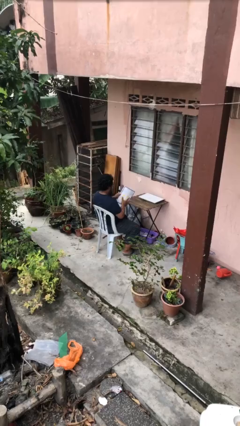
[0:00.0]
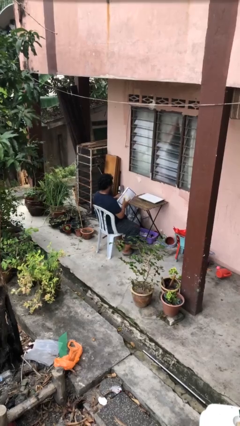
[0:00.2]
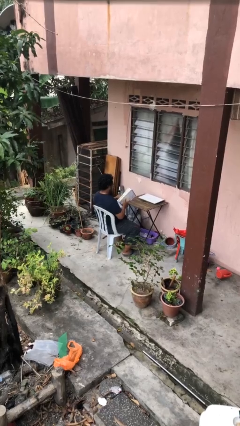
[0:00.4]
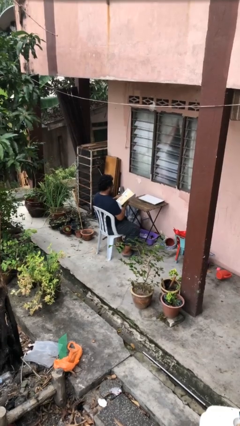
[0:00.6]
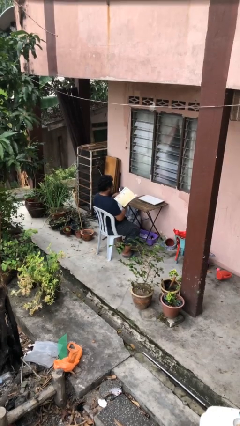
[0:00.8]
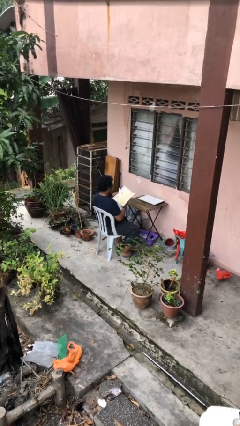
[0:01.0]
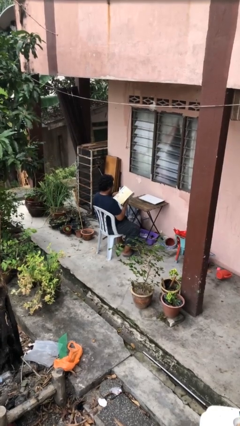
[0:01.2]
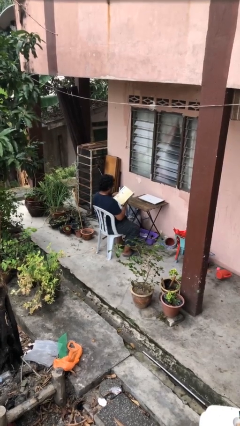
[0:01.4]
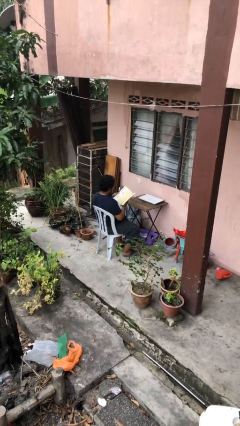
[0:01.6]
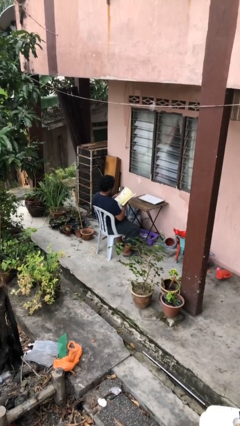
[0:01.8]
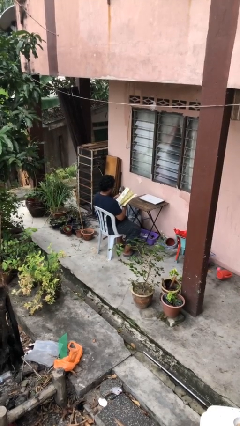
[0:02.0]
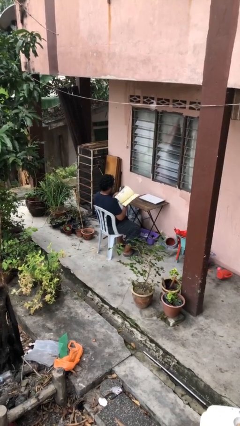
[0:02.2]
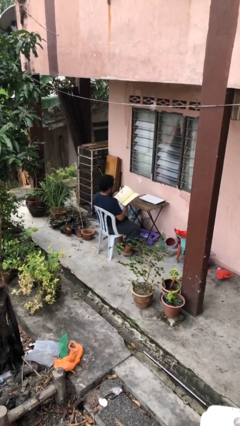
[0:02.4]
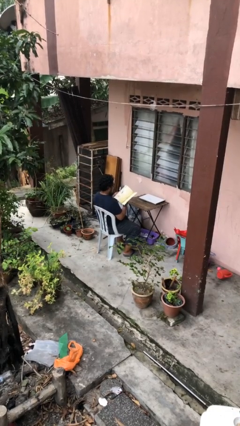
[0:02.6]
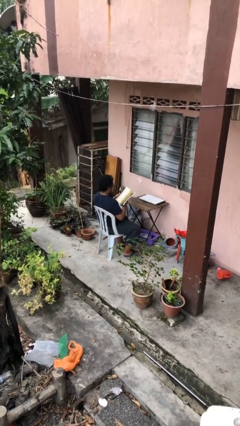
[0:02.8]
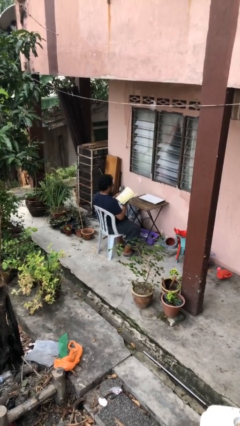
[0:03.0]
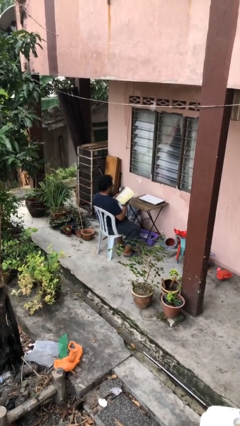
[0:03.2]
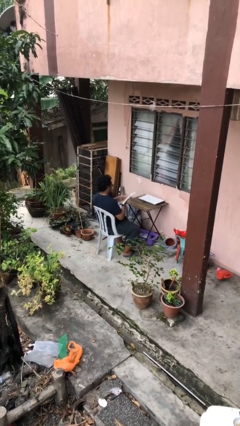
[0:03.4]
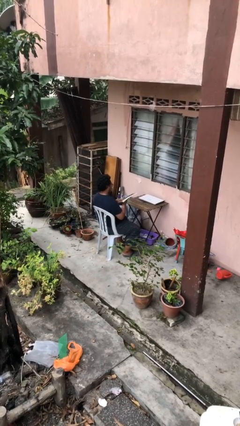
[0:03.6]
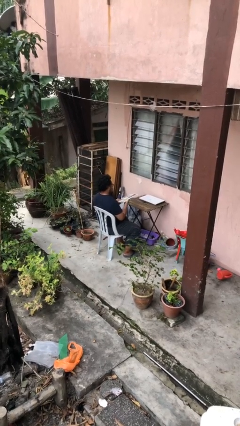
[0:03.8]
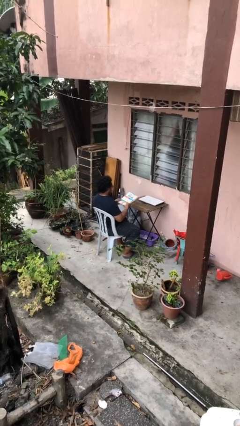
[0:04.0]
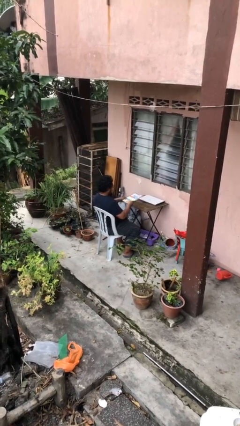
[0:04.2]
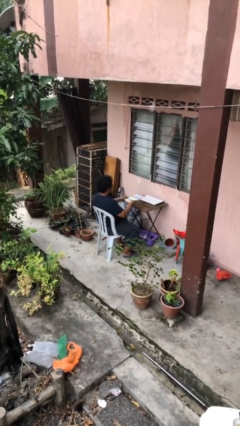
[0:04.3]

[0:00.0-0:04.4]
person reads document

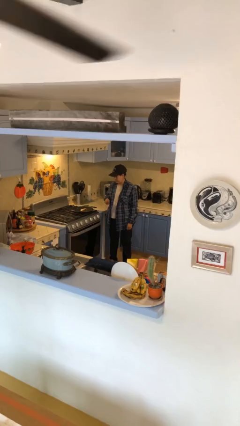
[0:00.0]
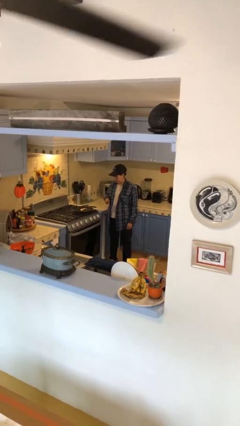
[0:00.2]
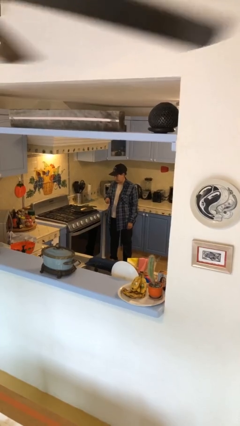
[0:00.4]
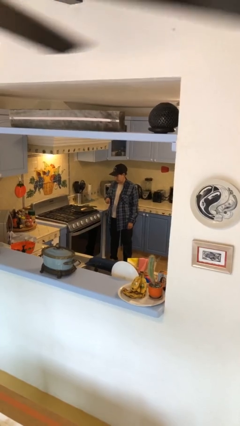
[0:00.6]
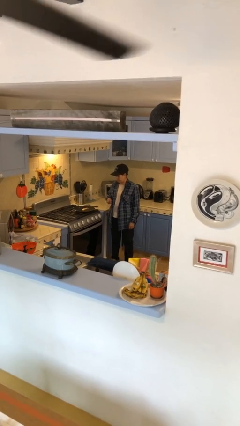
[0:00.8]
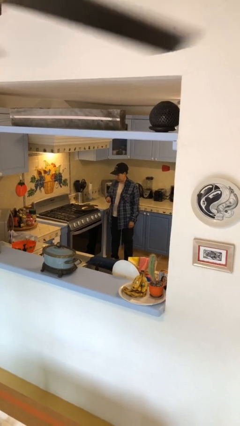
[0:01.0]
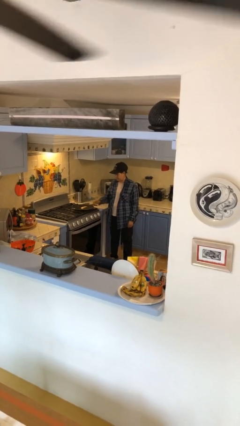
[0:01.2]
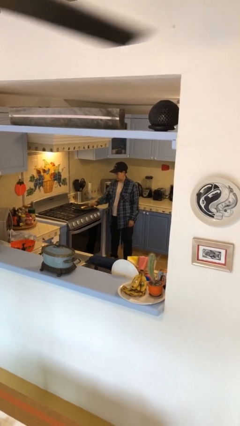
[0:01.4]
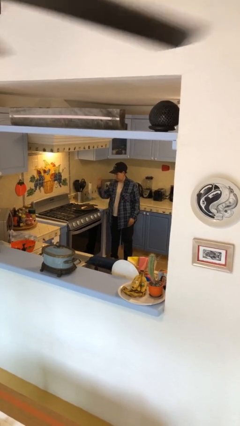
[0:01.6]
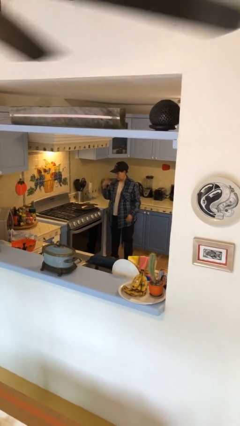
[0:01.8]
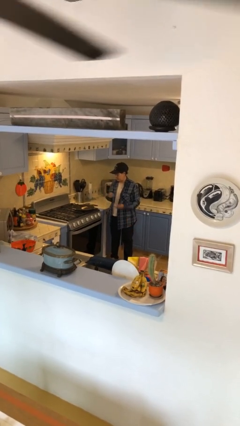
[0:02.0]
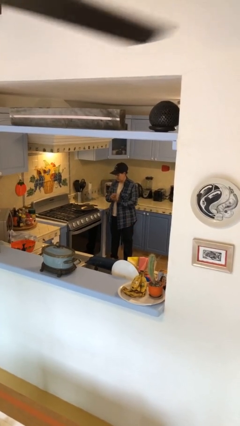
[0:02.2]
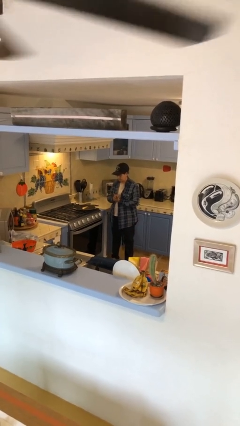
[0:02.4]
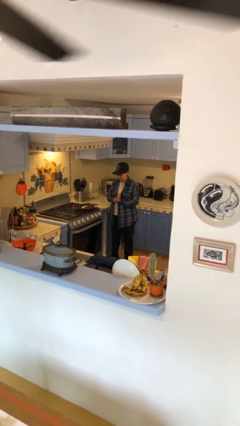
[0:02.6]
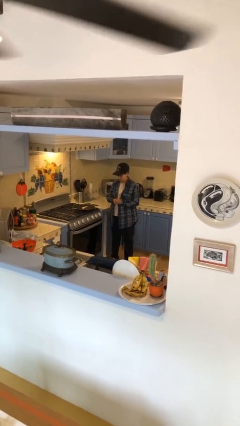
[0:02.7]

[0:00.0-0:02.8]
person burns hand

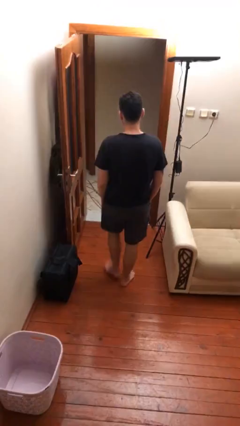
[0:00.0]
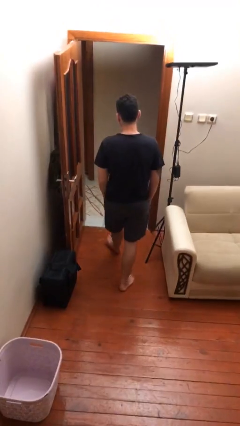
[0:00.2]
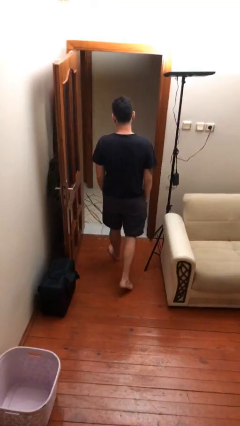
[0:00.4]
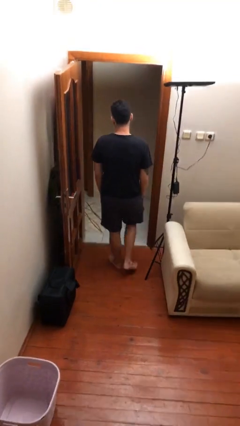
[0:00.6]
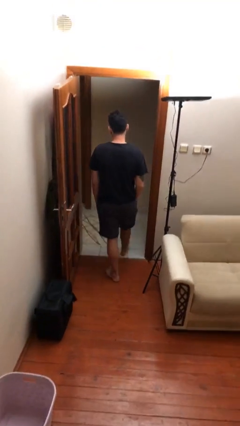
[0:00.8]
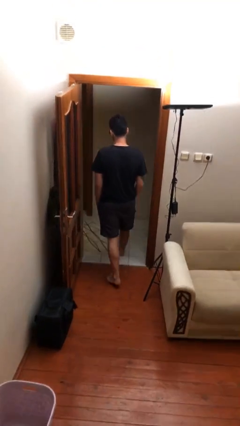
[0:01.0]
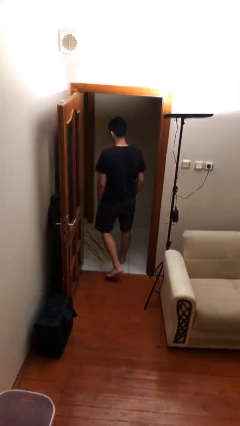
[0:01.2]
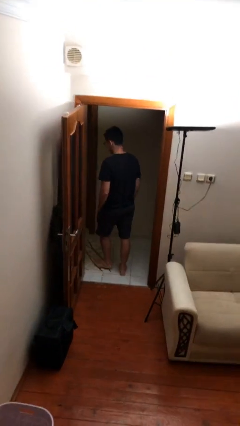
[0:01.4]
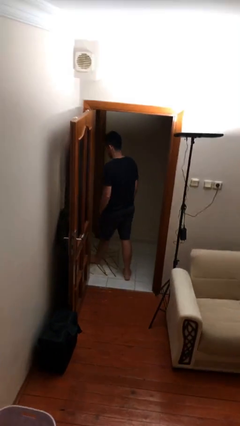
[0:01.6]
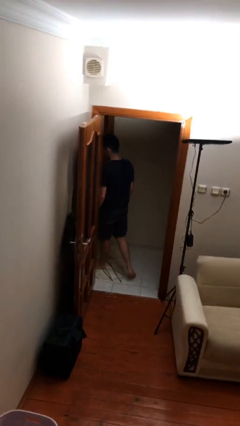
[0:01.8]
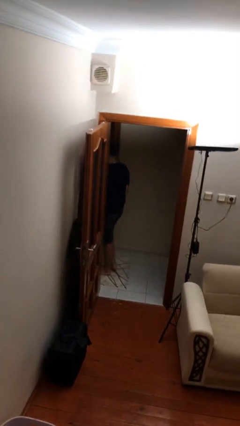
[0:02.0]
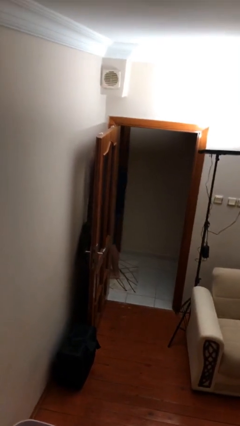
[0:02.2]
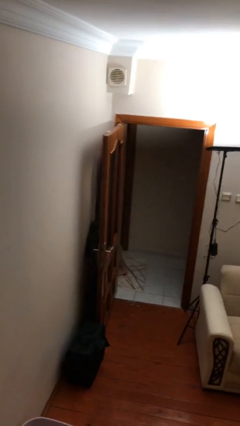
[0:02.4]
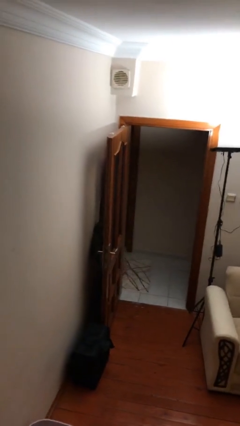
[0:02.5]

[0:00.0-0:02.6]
person exits scene through structure

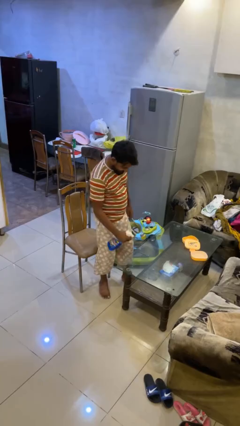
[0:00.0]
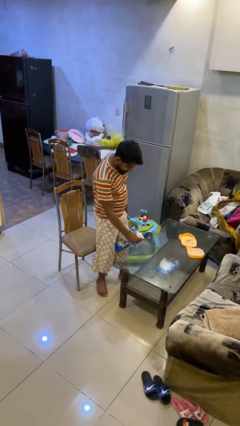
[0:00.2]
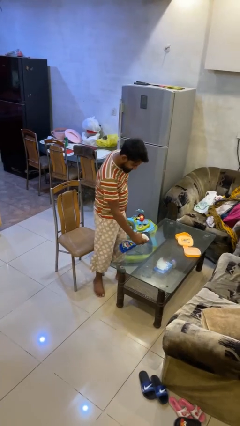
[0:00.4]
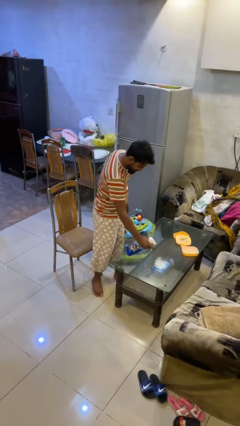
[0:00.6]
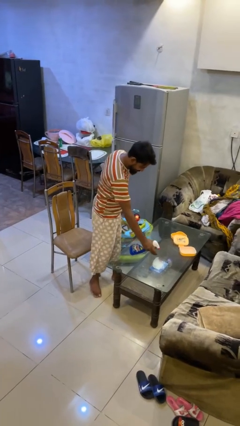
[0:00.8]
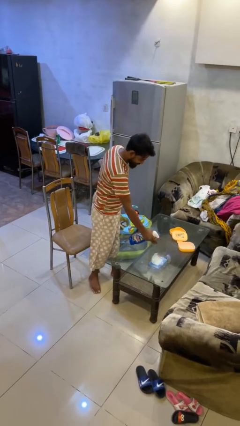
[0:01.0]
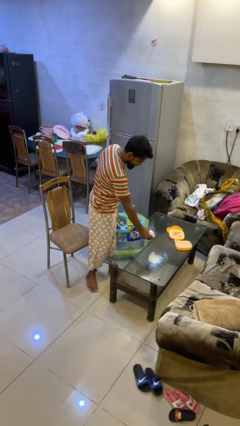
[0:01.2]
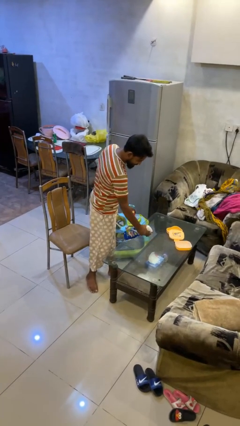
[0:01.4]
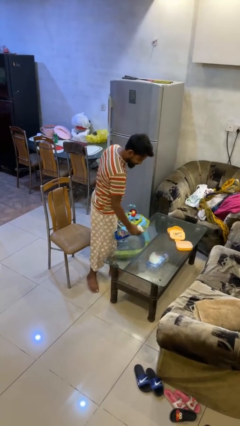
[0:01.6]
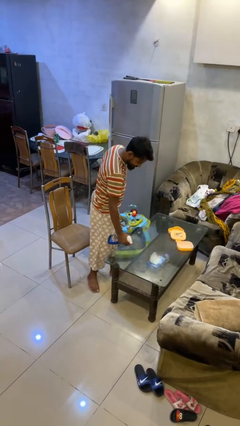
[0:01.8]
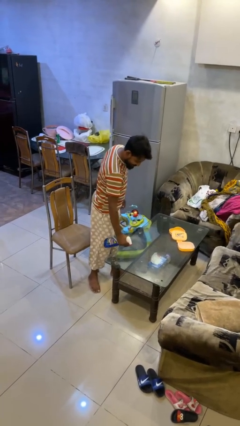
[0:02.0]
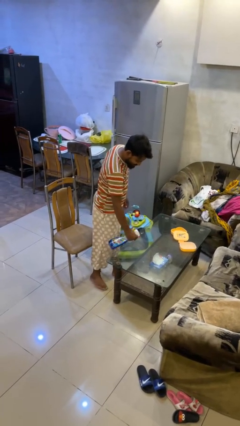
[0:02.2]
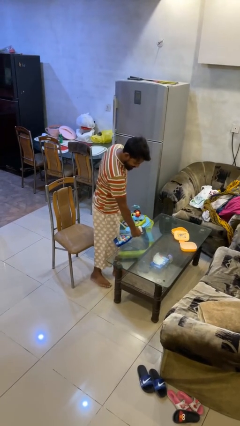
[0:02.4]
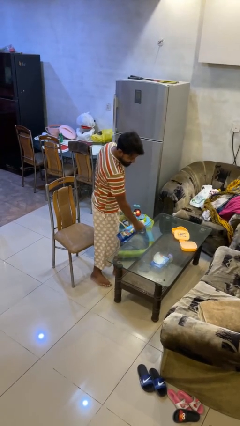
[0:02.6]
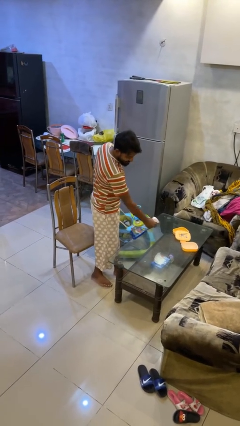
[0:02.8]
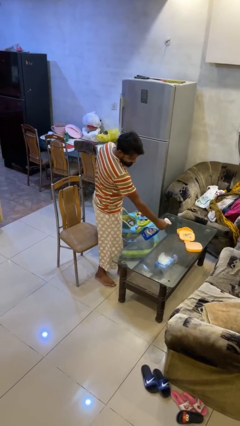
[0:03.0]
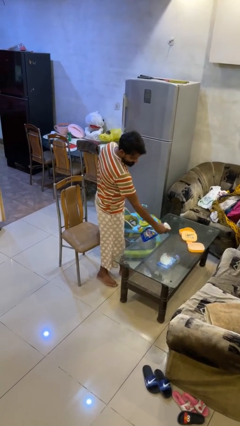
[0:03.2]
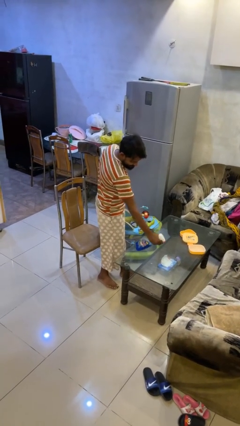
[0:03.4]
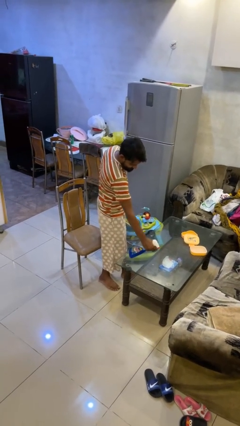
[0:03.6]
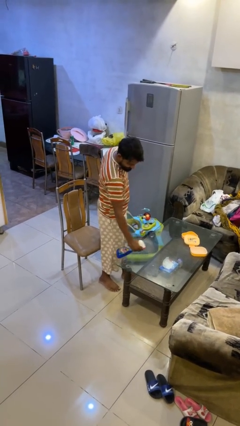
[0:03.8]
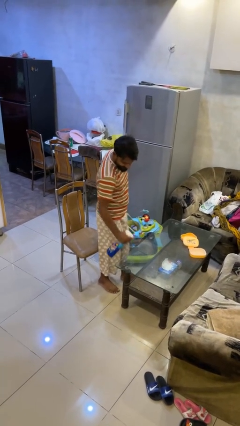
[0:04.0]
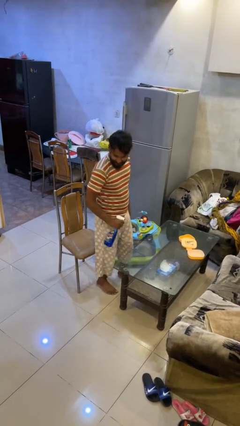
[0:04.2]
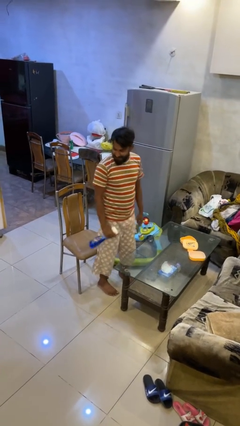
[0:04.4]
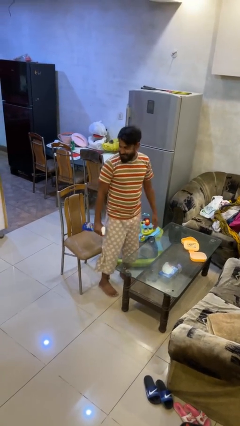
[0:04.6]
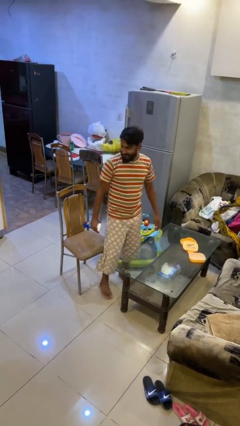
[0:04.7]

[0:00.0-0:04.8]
person sprays from bottle

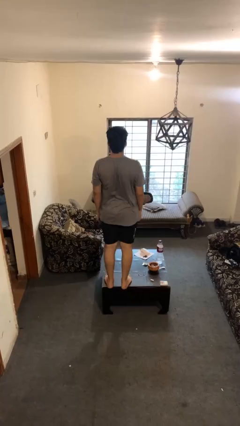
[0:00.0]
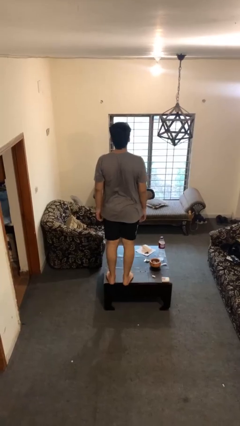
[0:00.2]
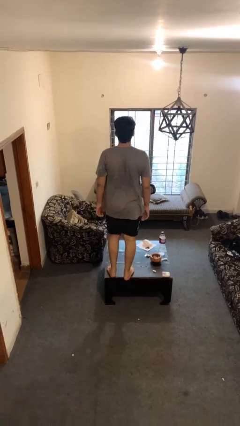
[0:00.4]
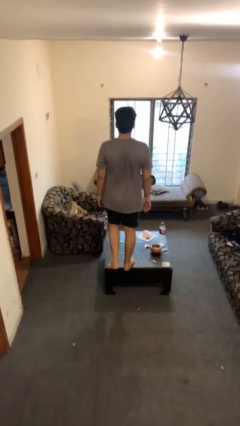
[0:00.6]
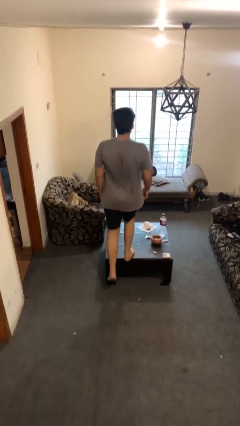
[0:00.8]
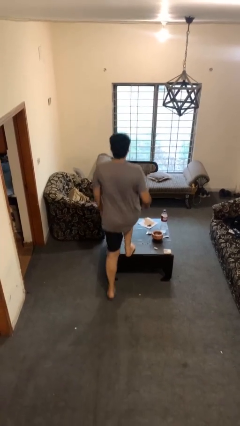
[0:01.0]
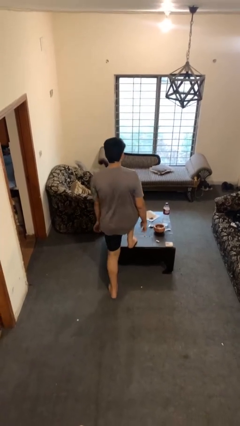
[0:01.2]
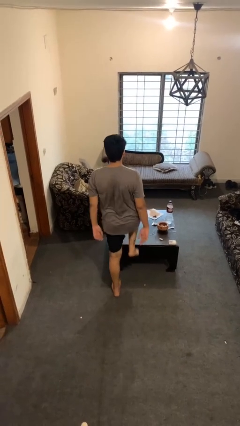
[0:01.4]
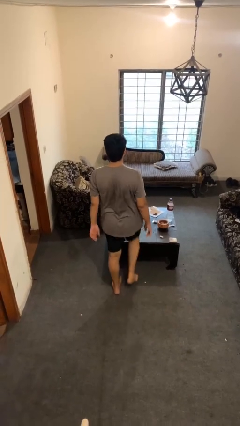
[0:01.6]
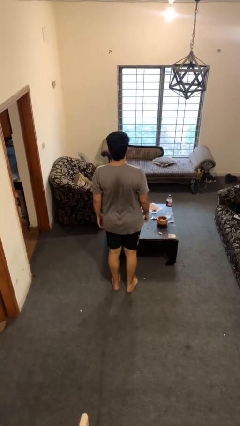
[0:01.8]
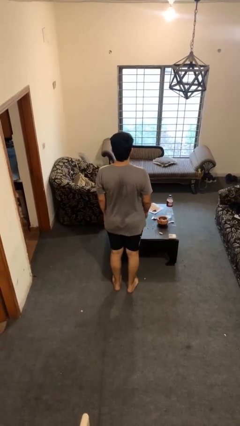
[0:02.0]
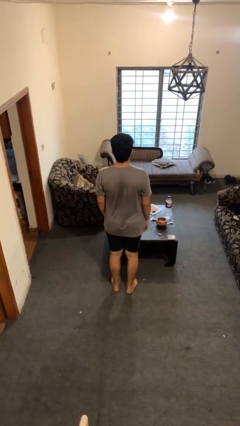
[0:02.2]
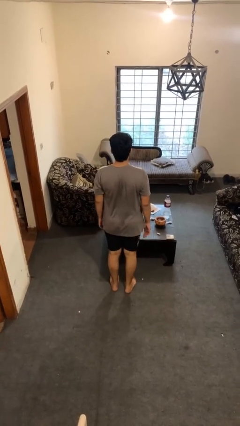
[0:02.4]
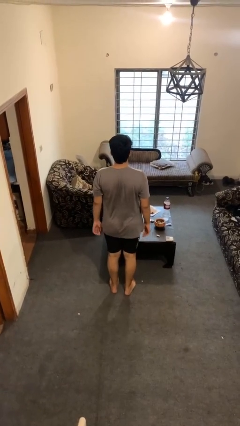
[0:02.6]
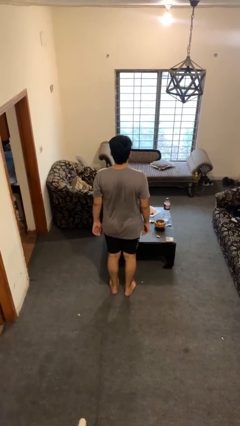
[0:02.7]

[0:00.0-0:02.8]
person climbs off table
